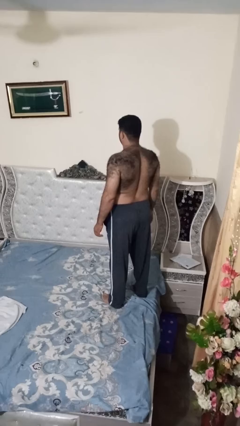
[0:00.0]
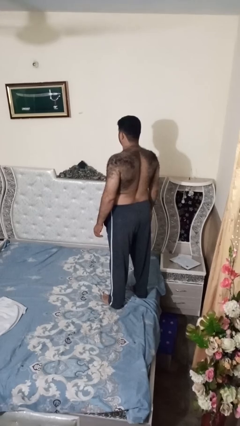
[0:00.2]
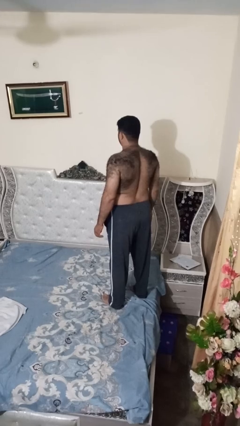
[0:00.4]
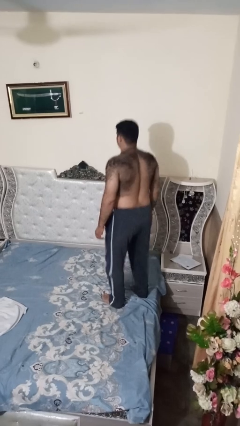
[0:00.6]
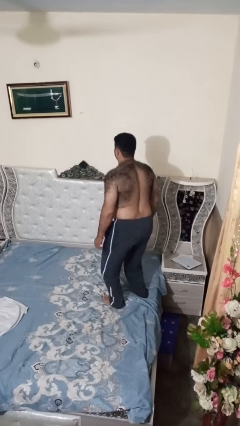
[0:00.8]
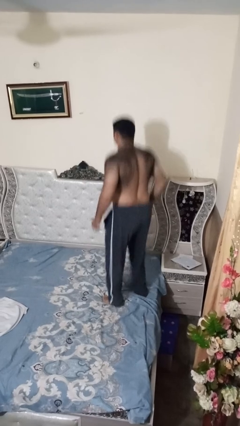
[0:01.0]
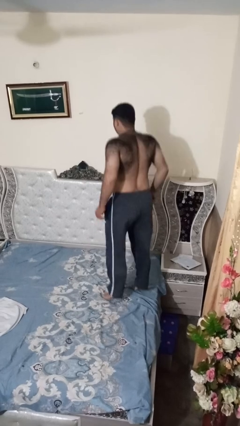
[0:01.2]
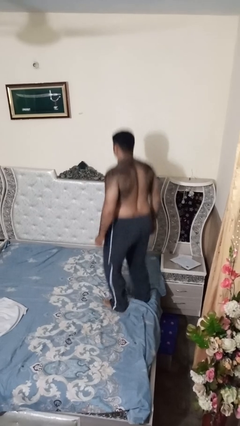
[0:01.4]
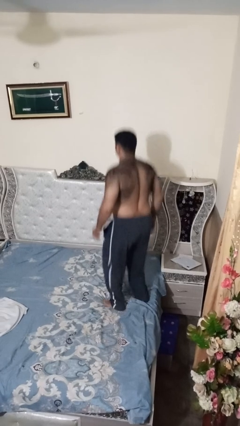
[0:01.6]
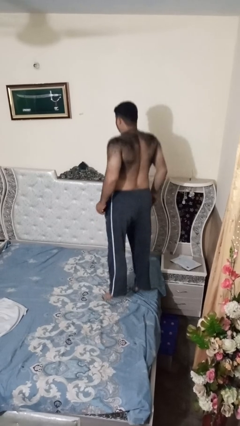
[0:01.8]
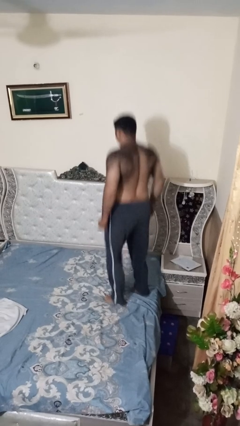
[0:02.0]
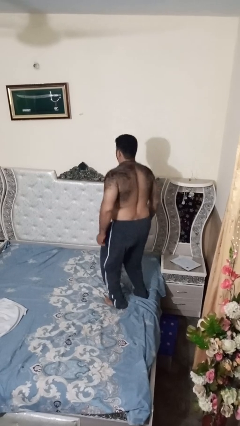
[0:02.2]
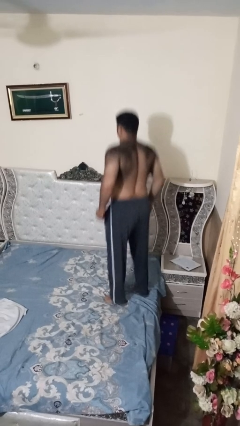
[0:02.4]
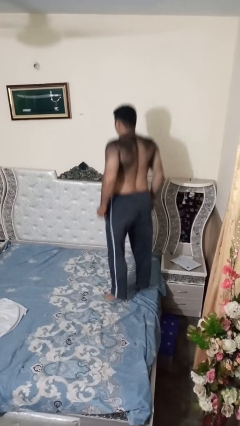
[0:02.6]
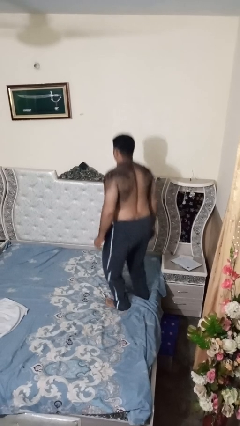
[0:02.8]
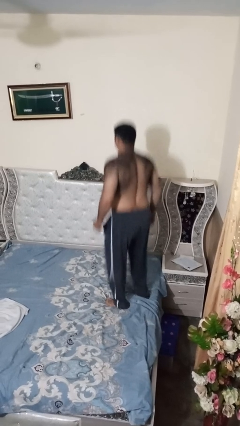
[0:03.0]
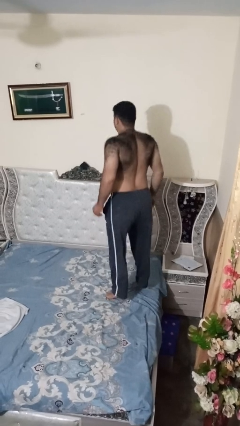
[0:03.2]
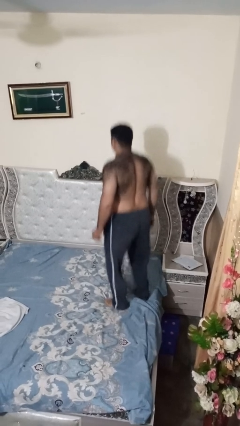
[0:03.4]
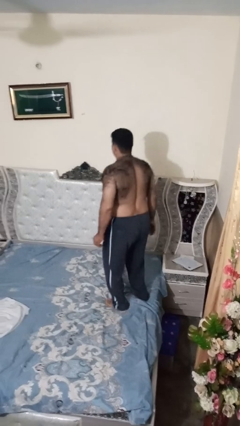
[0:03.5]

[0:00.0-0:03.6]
person jumps on bed

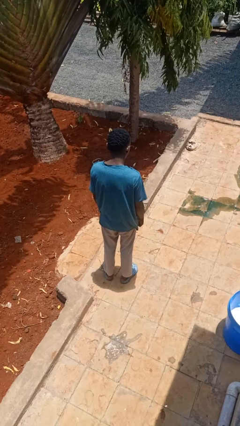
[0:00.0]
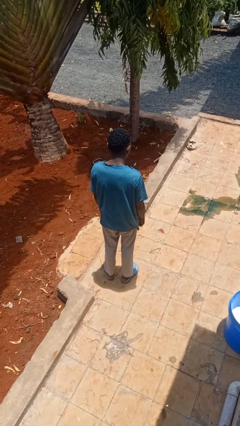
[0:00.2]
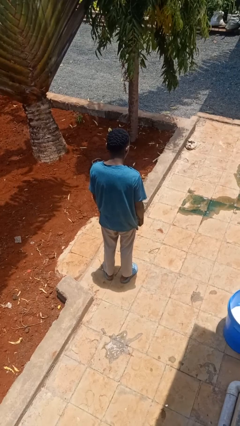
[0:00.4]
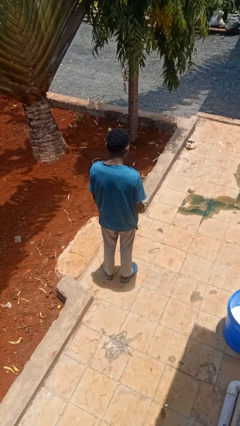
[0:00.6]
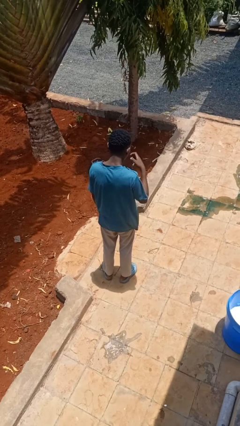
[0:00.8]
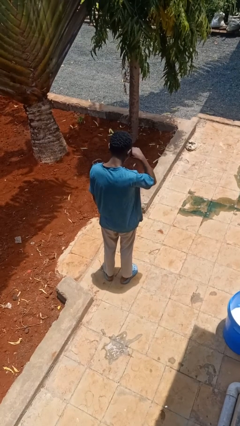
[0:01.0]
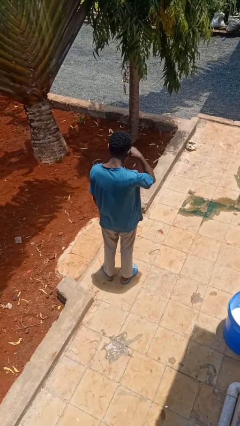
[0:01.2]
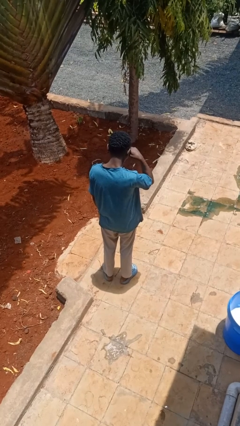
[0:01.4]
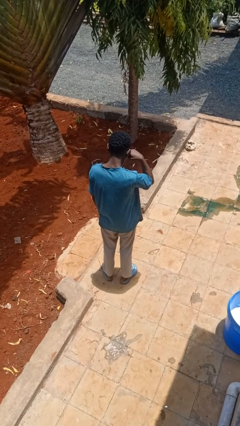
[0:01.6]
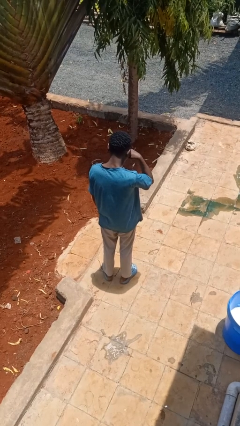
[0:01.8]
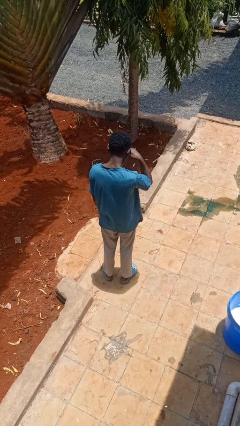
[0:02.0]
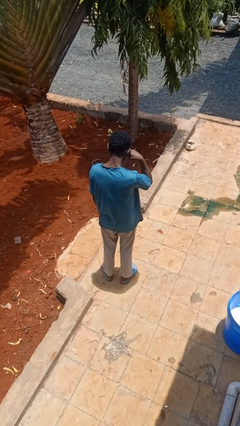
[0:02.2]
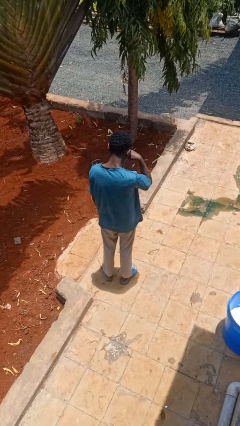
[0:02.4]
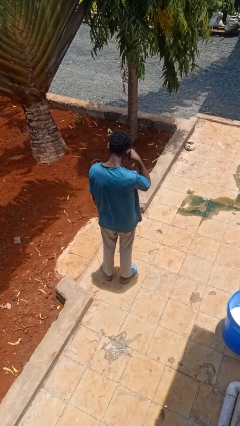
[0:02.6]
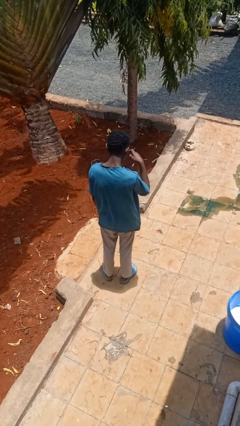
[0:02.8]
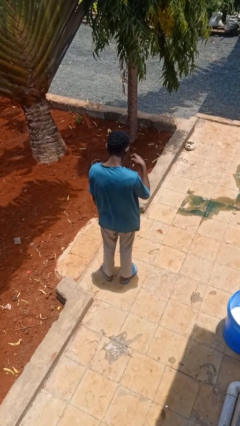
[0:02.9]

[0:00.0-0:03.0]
person rubs eyes

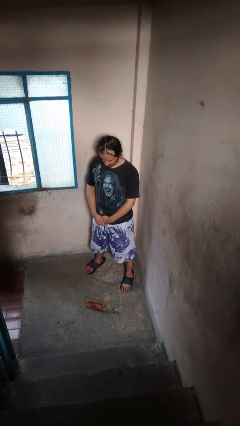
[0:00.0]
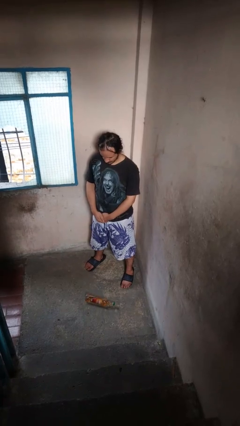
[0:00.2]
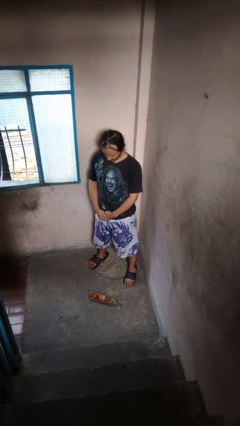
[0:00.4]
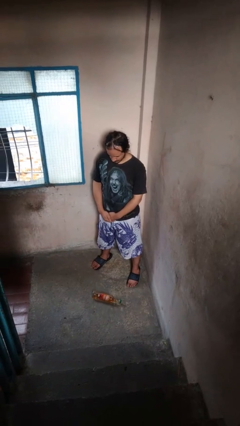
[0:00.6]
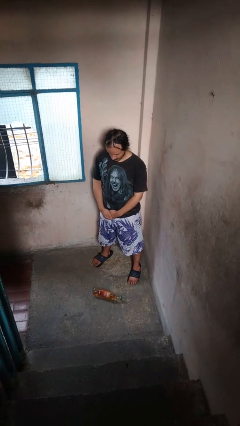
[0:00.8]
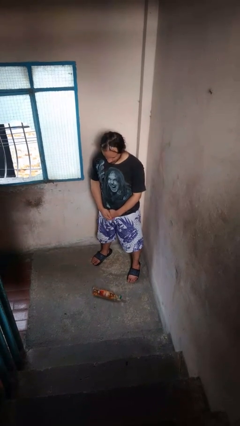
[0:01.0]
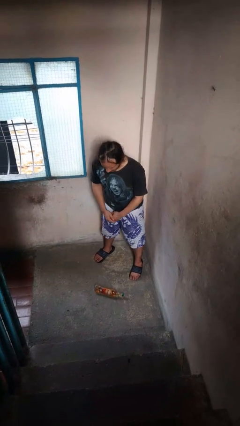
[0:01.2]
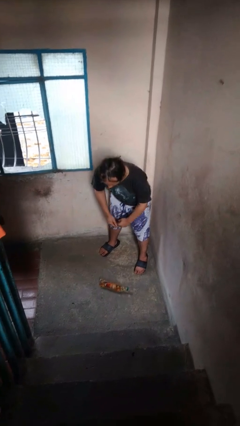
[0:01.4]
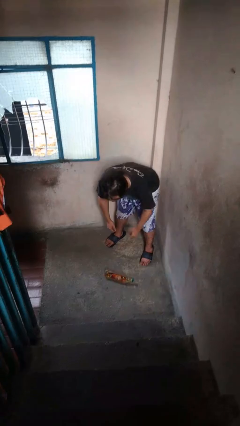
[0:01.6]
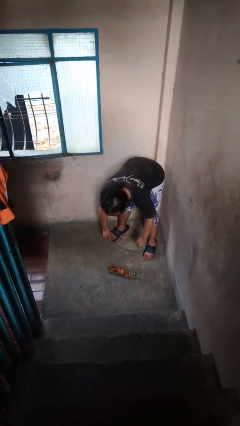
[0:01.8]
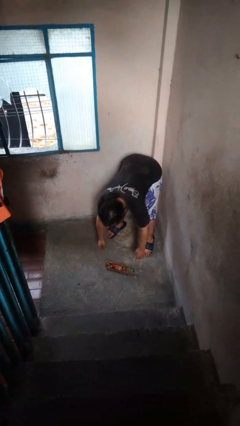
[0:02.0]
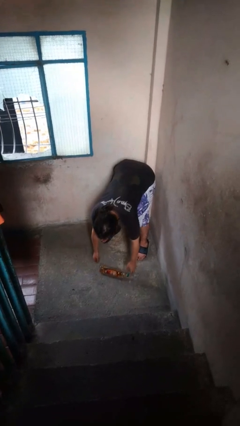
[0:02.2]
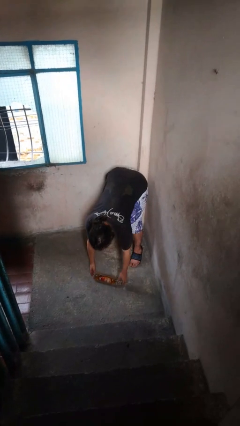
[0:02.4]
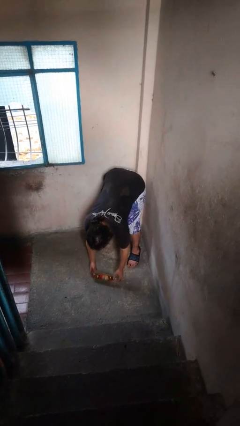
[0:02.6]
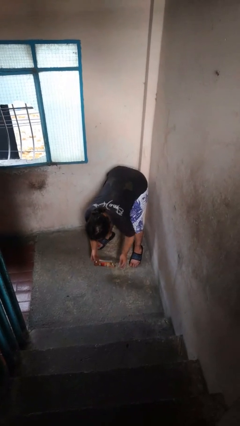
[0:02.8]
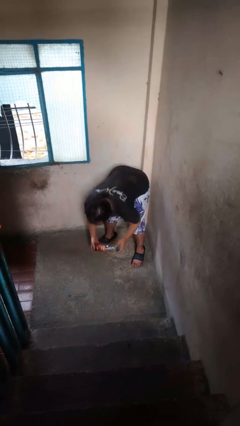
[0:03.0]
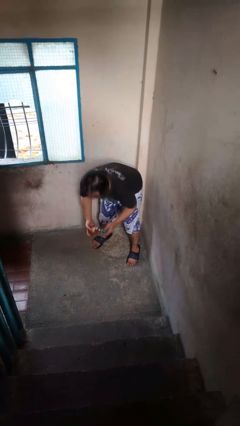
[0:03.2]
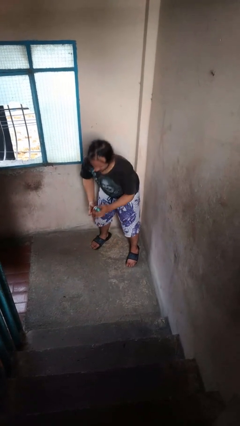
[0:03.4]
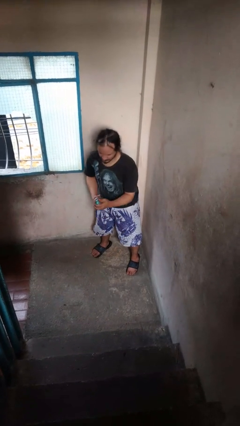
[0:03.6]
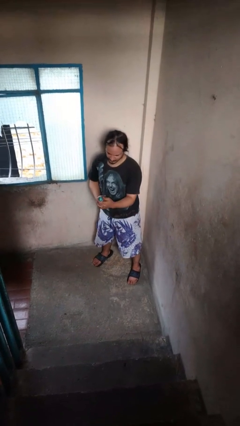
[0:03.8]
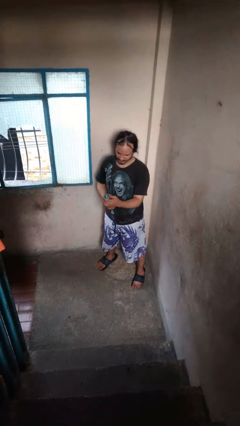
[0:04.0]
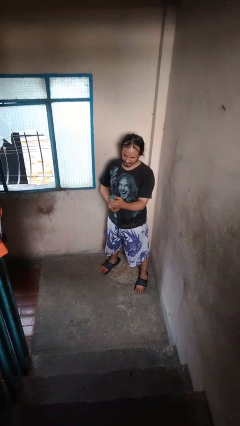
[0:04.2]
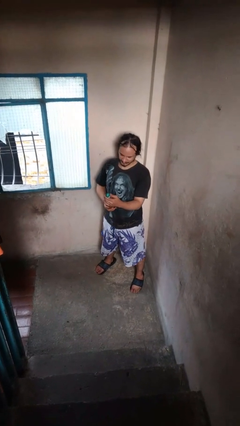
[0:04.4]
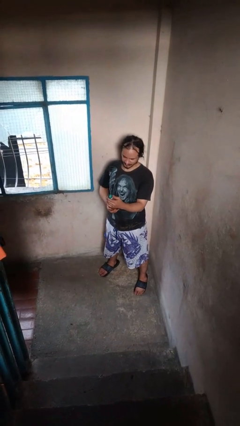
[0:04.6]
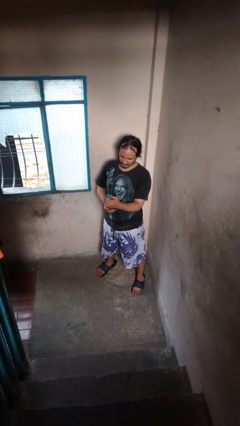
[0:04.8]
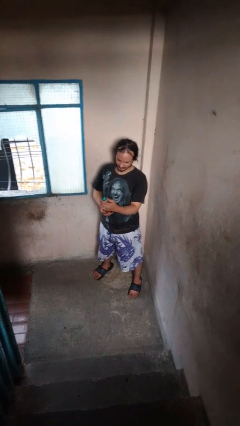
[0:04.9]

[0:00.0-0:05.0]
person picks up object from floor

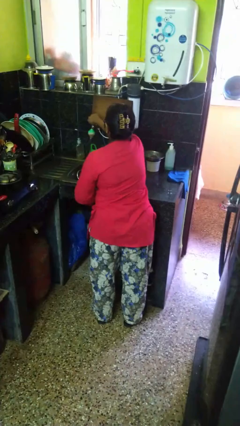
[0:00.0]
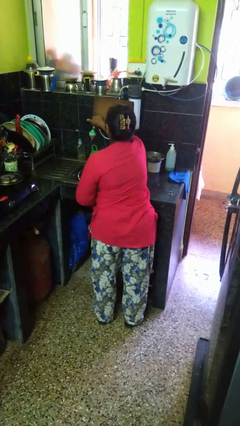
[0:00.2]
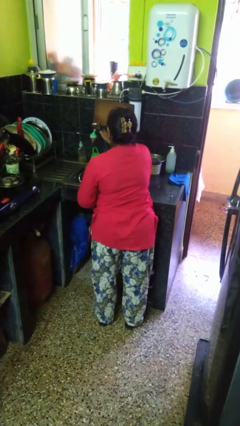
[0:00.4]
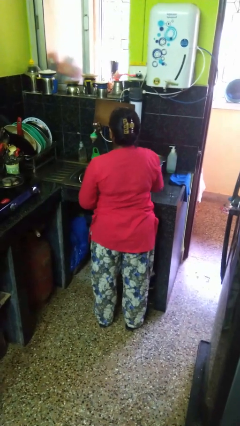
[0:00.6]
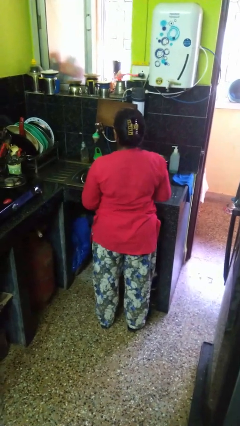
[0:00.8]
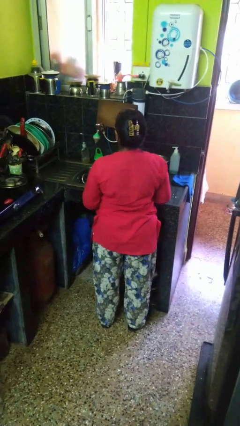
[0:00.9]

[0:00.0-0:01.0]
person turns off faucet

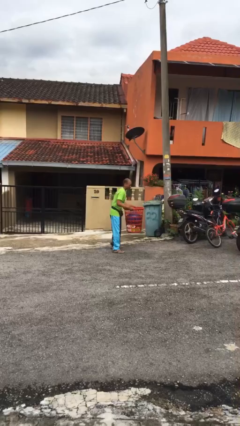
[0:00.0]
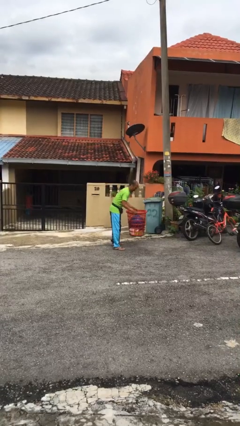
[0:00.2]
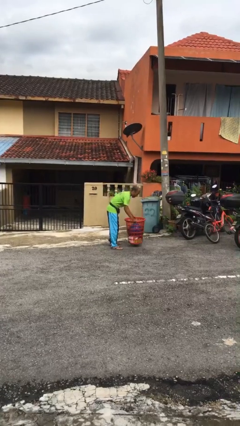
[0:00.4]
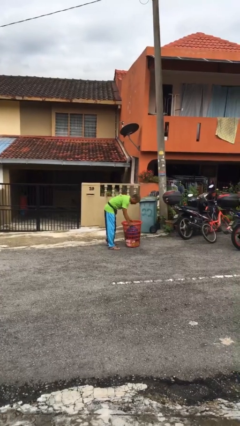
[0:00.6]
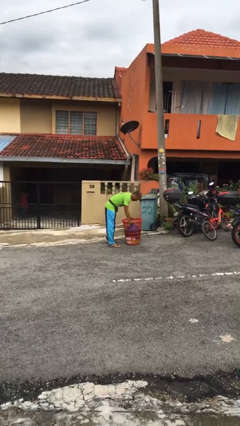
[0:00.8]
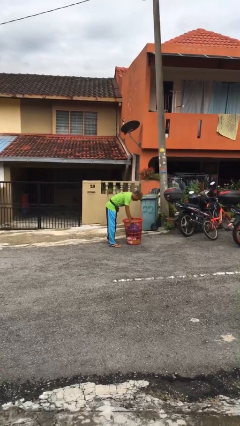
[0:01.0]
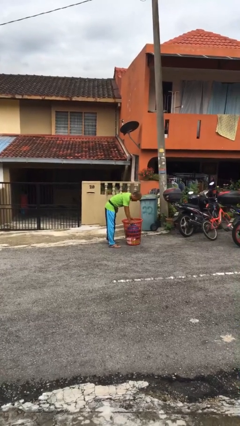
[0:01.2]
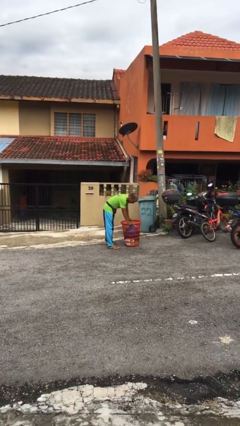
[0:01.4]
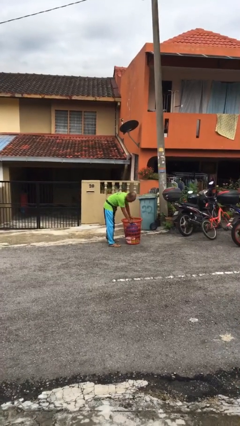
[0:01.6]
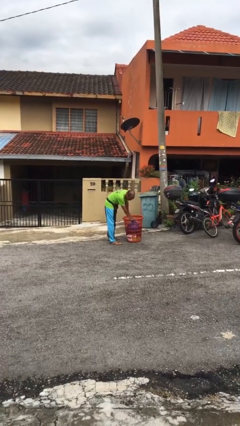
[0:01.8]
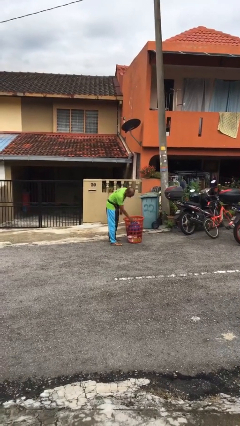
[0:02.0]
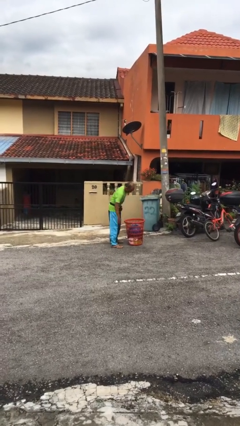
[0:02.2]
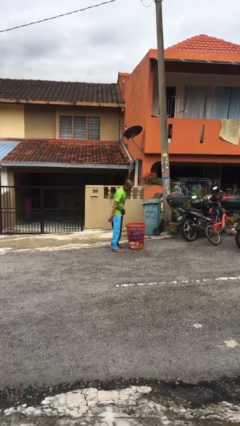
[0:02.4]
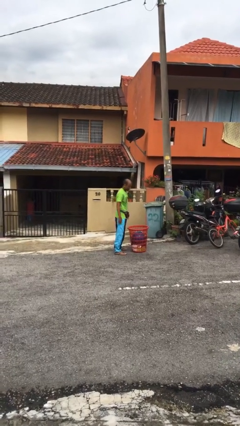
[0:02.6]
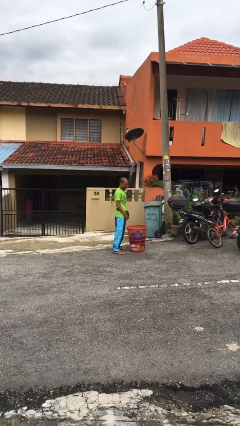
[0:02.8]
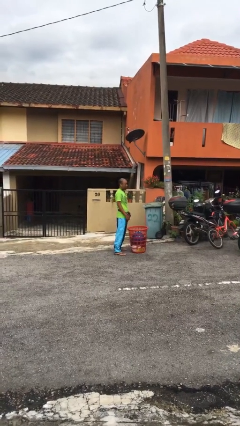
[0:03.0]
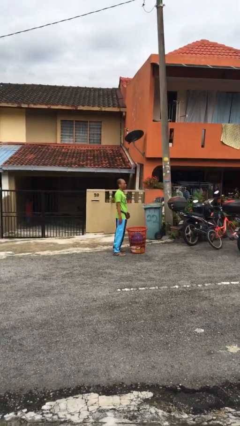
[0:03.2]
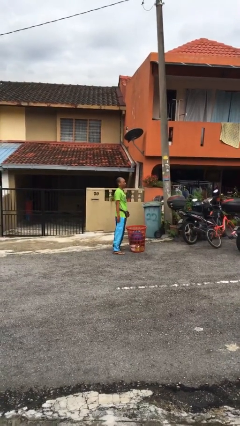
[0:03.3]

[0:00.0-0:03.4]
person puts down object on floor

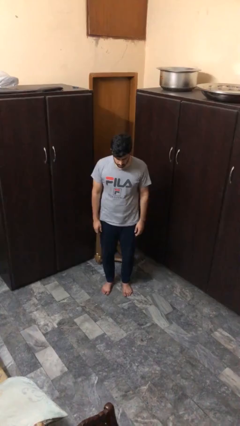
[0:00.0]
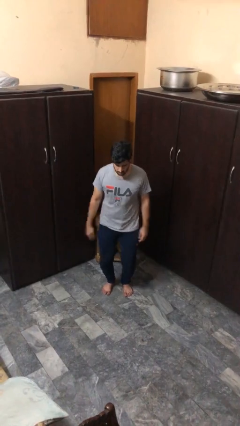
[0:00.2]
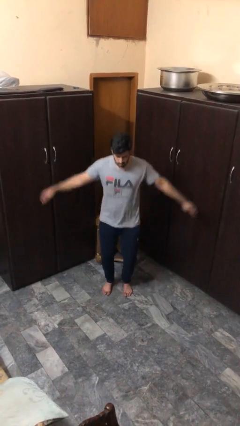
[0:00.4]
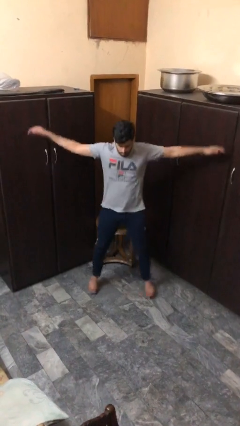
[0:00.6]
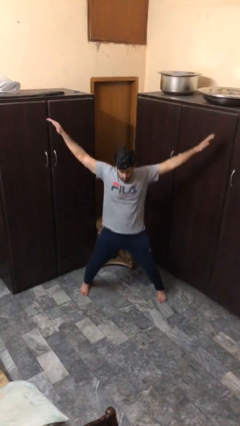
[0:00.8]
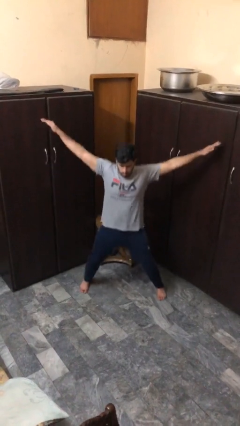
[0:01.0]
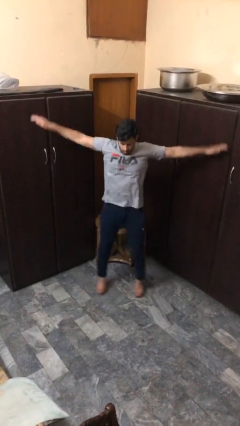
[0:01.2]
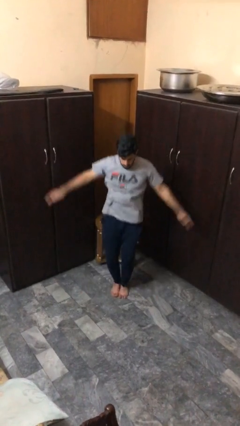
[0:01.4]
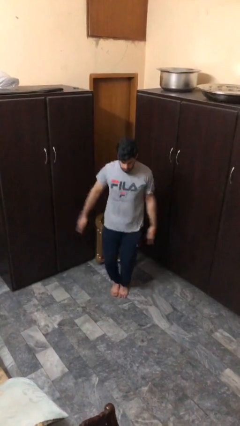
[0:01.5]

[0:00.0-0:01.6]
person exercises with jumping jacks
